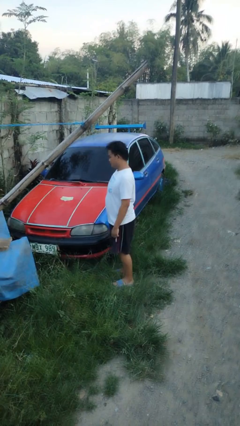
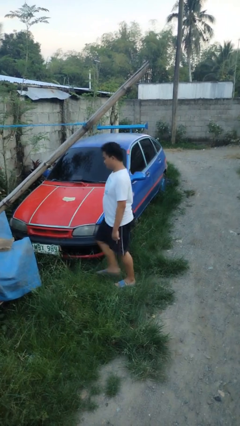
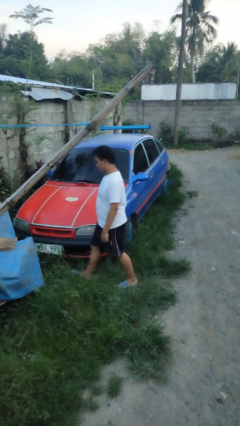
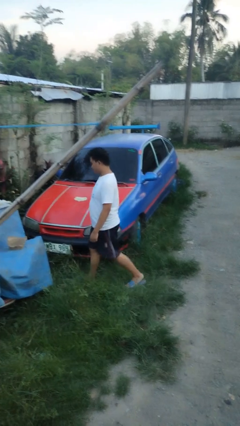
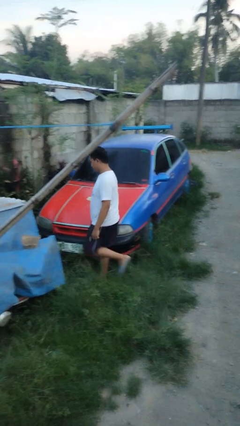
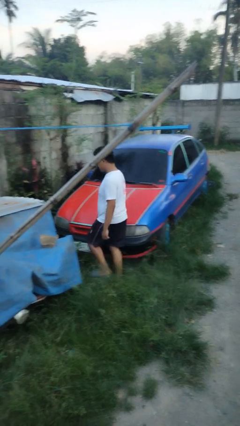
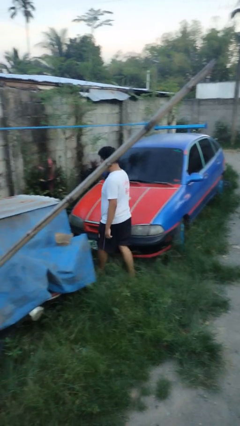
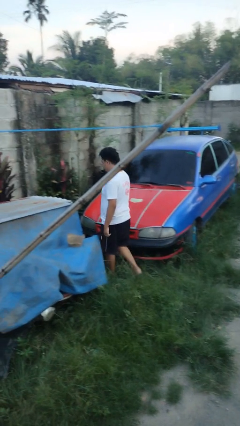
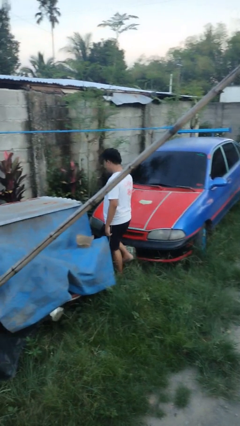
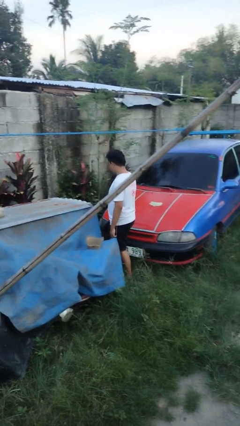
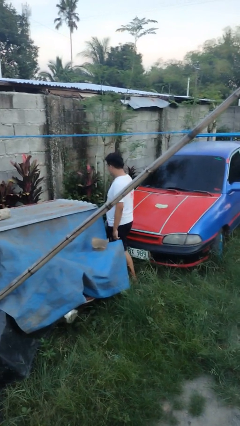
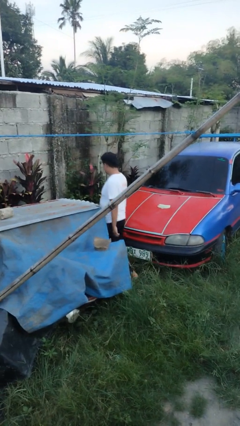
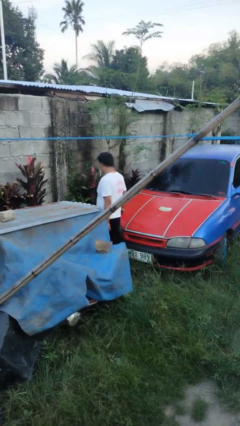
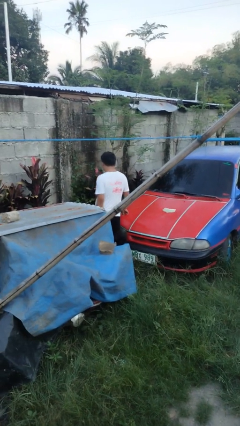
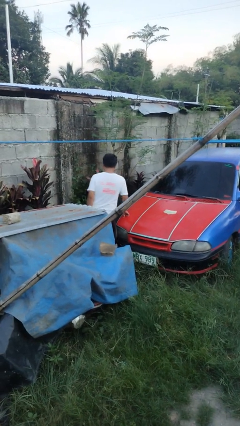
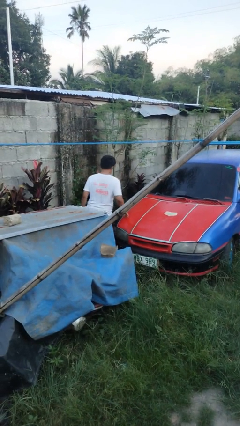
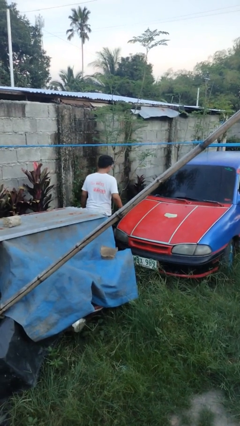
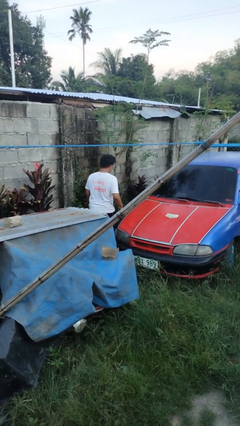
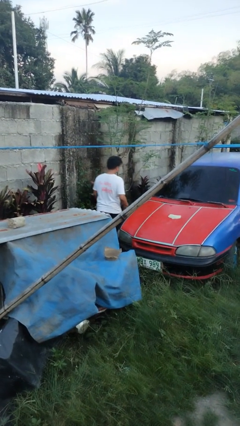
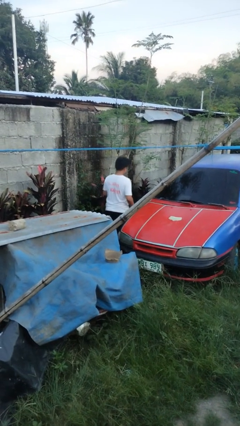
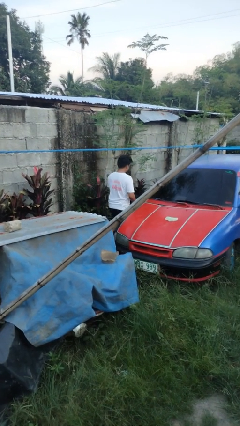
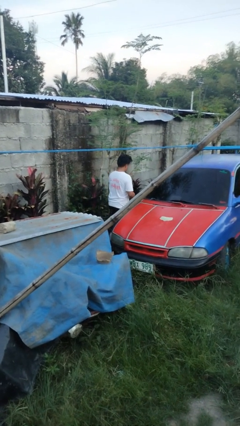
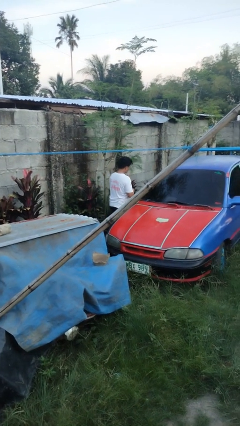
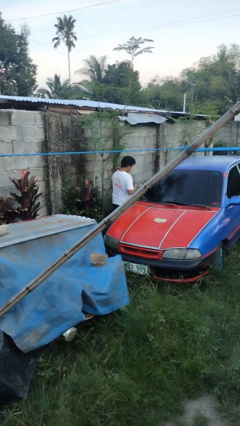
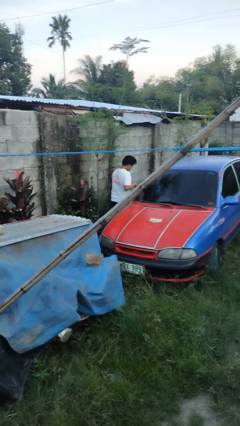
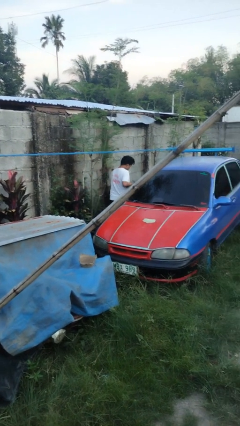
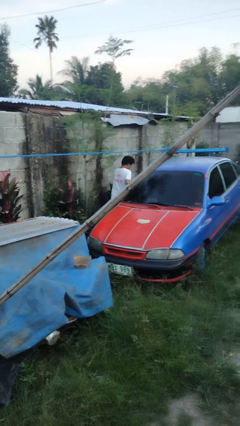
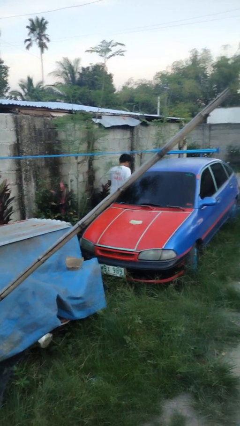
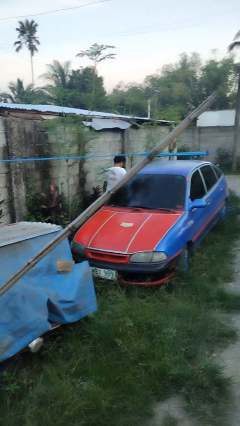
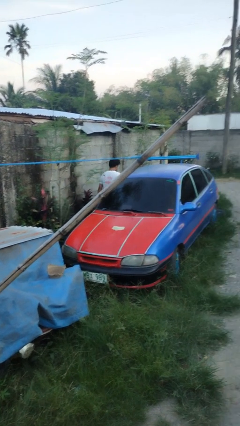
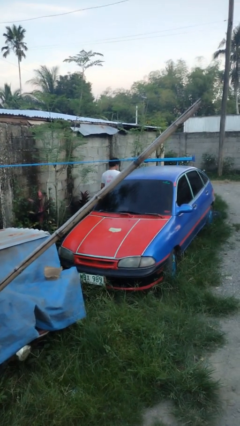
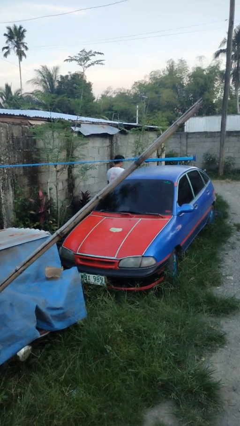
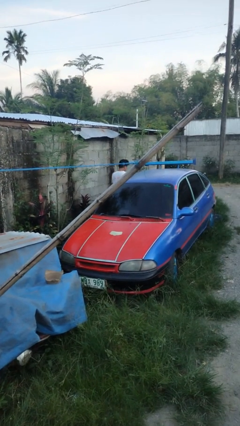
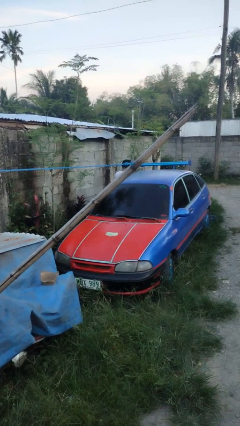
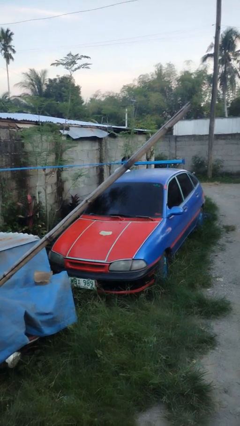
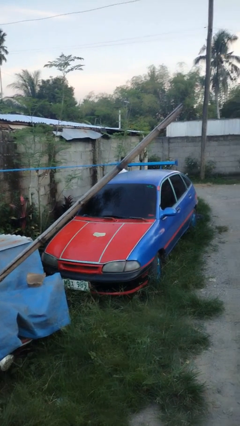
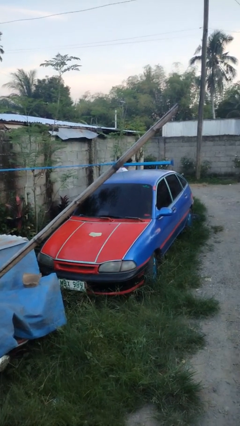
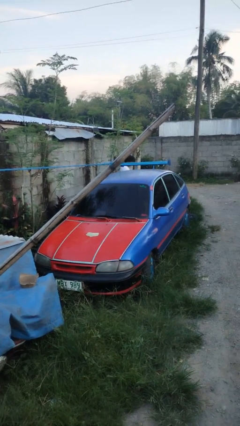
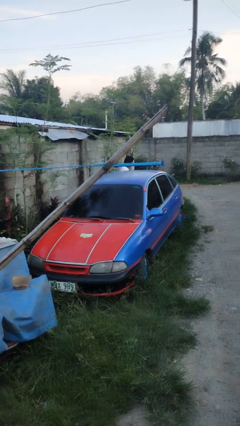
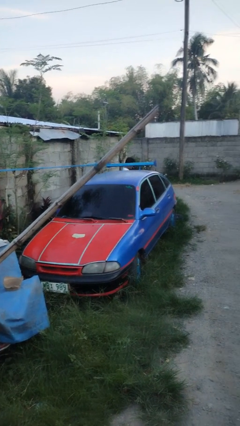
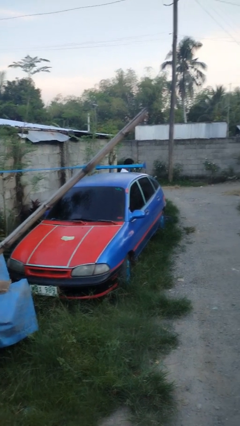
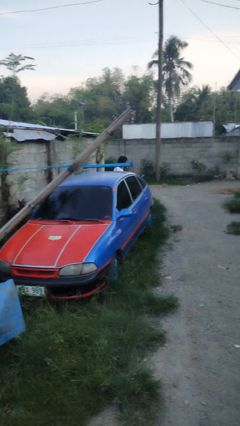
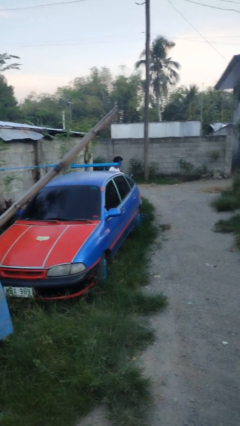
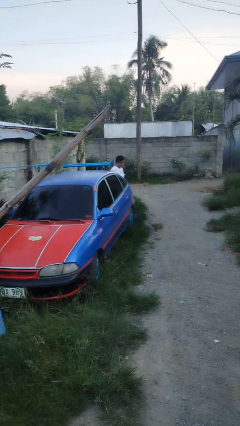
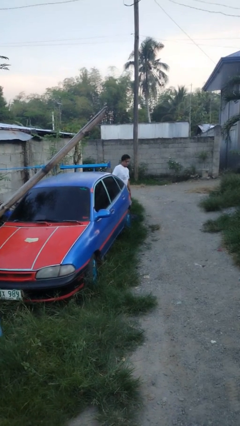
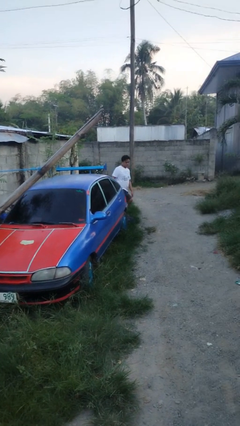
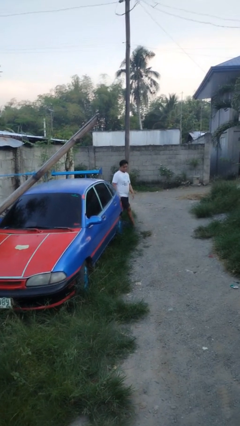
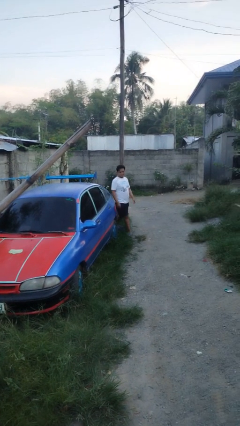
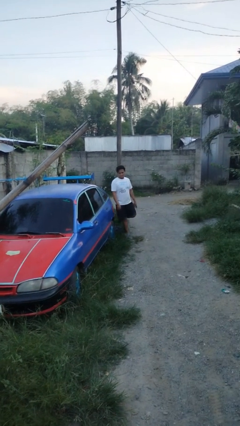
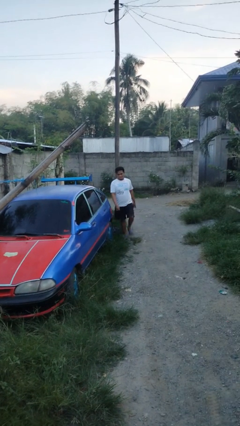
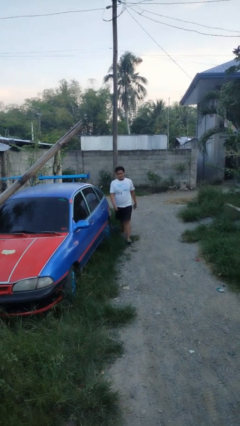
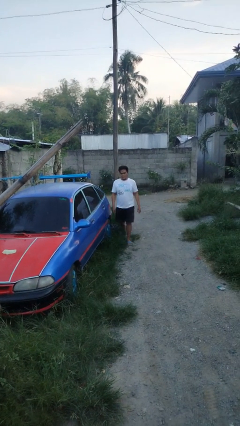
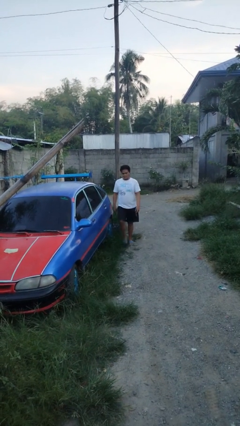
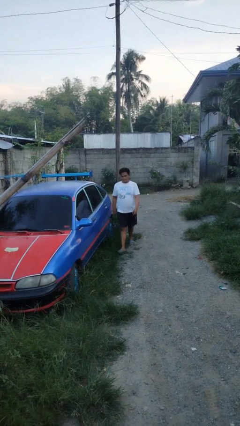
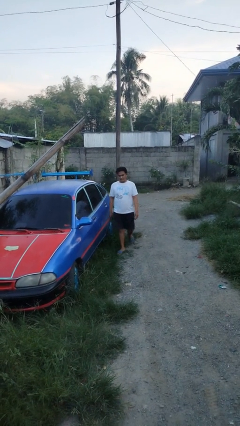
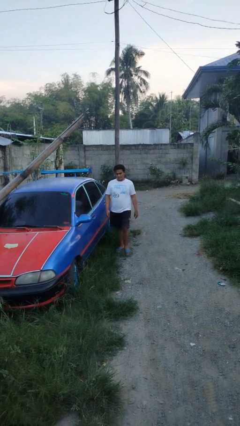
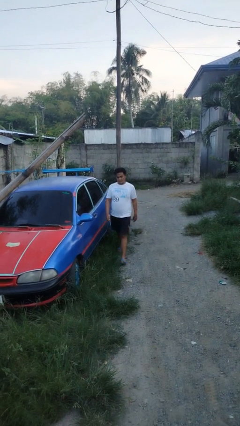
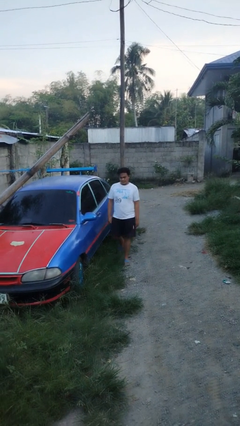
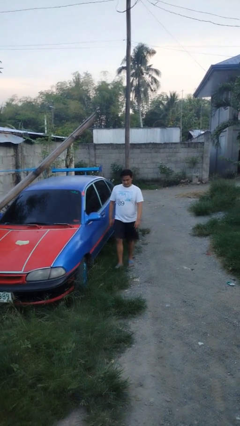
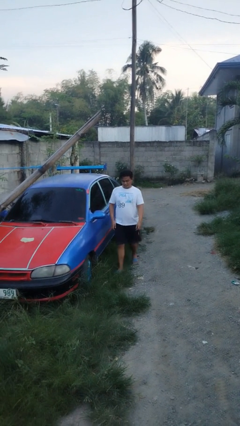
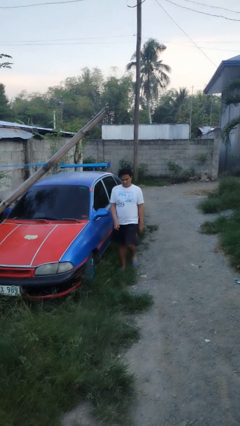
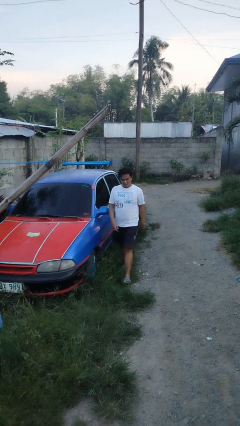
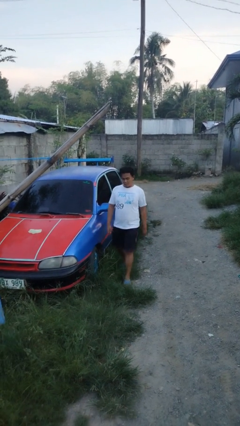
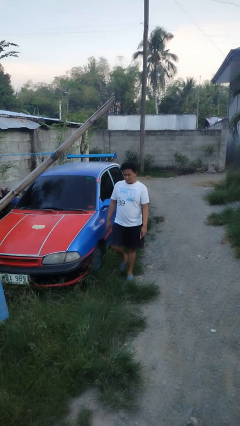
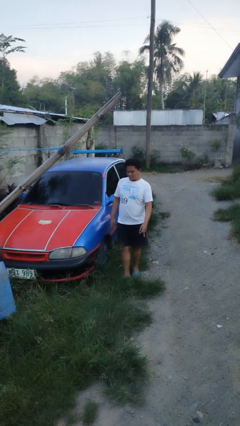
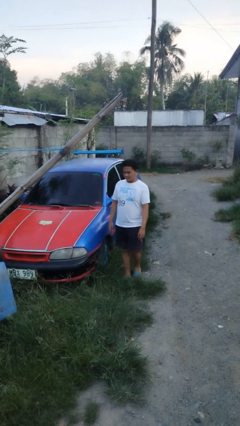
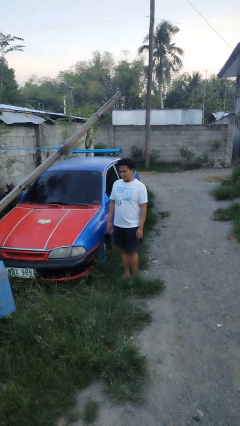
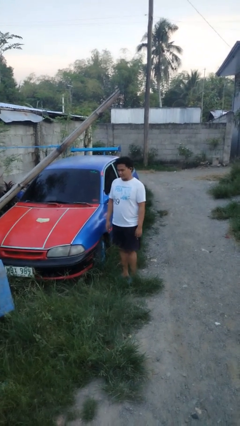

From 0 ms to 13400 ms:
person walks around car

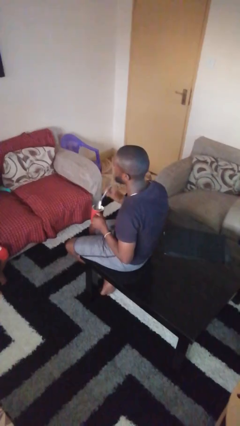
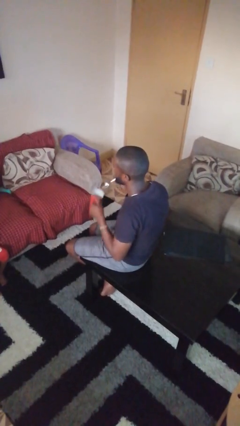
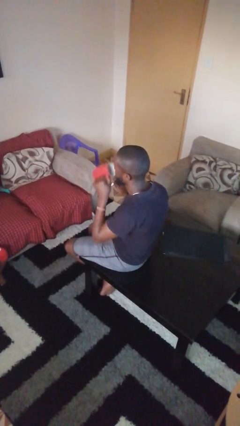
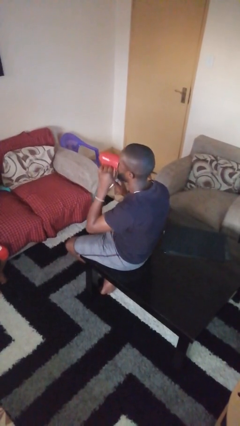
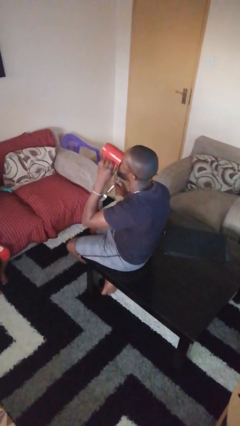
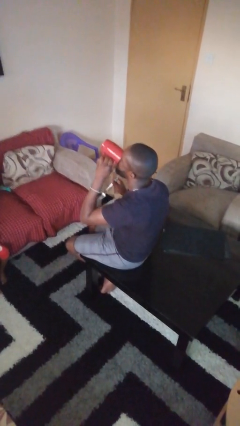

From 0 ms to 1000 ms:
person drinks from mug

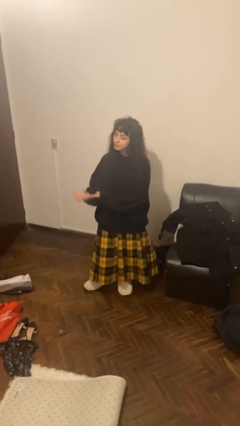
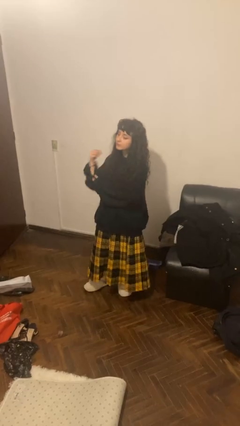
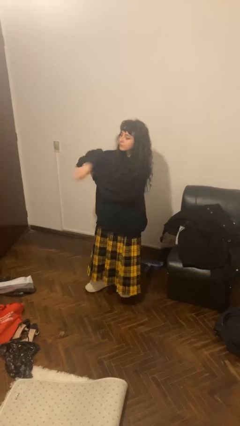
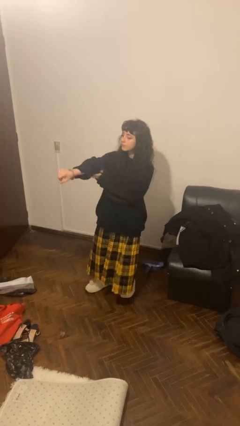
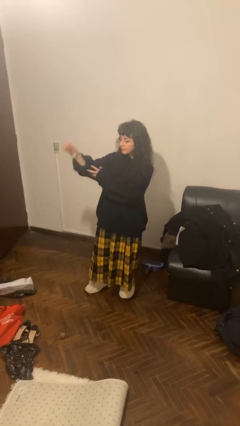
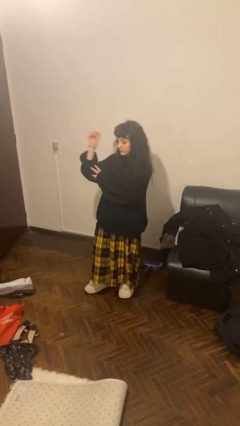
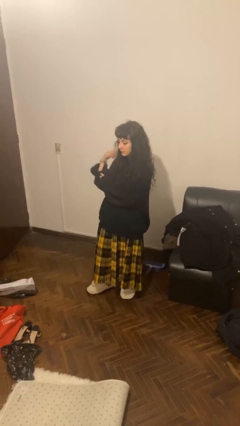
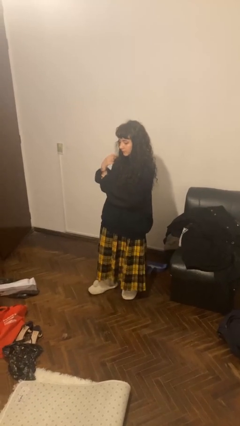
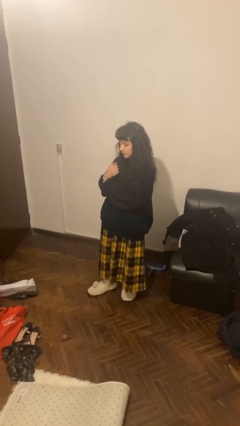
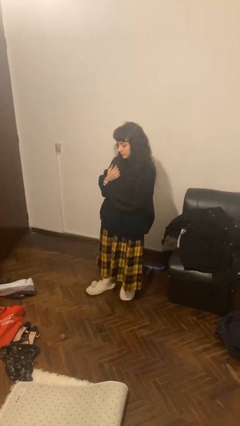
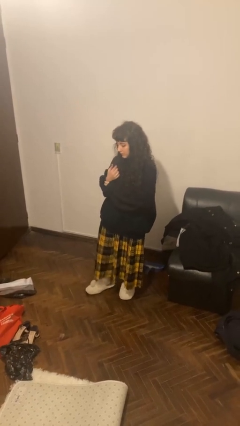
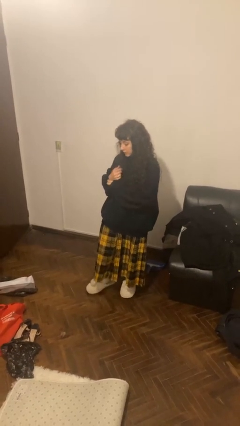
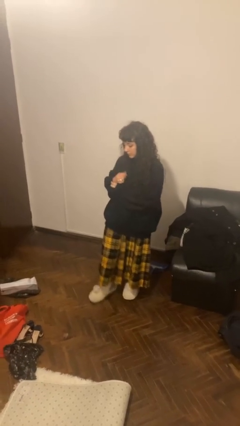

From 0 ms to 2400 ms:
person punches

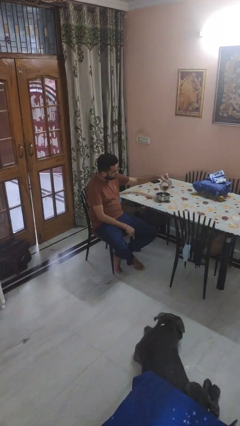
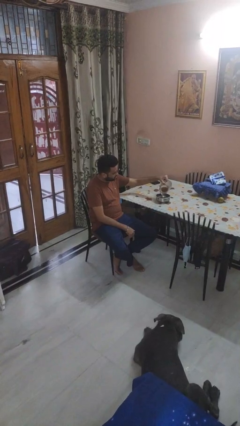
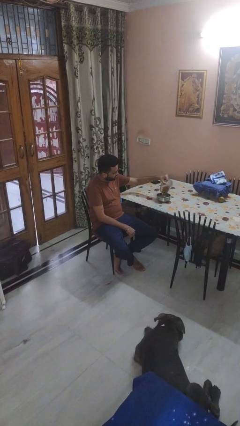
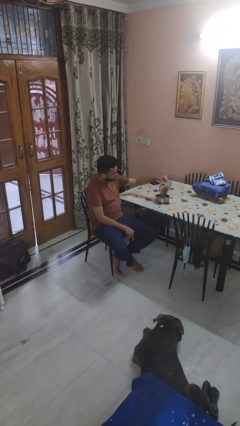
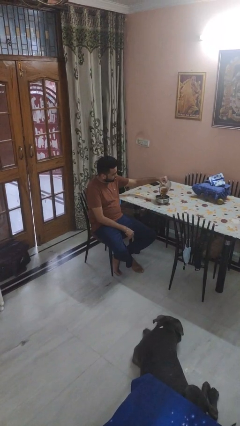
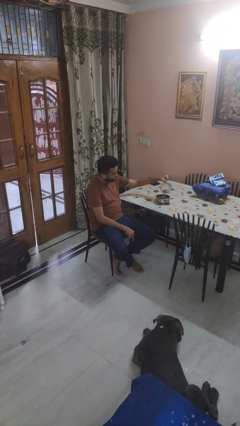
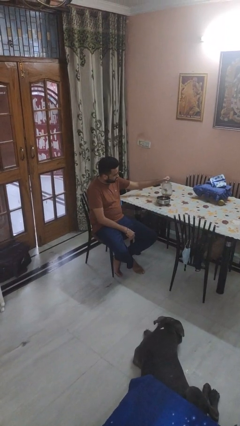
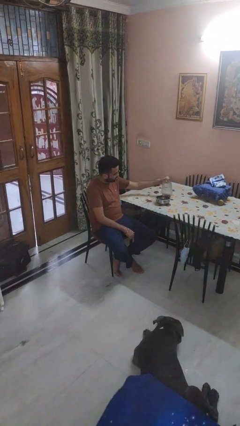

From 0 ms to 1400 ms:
person pours into bowl
